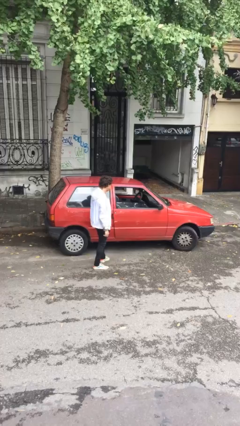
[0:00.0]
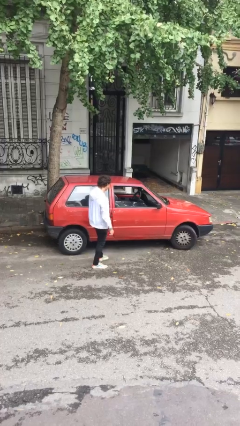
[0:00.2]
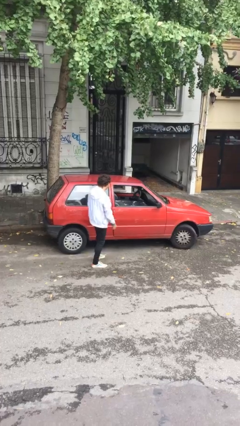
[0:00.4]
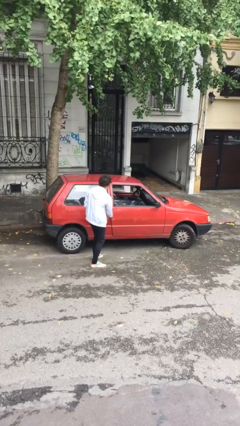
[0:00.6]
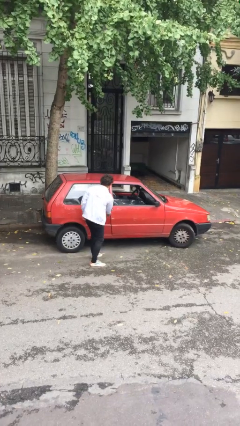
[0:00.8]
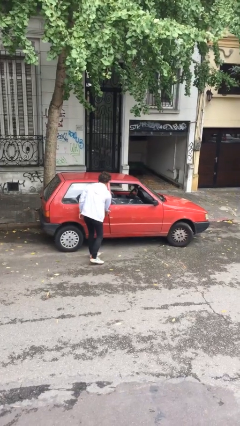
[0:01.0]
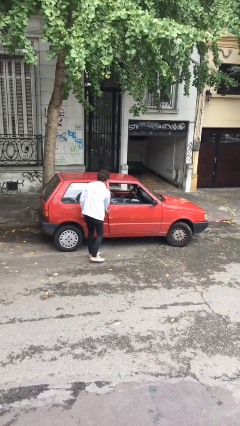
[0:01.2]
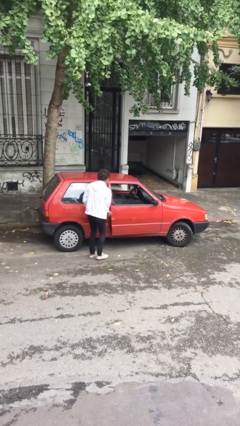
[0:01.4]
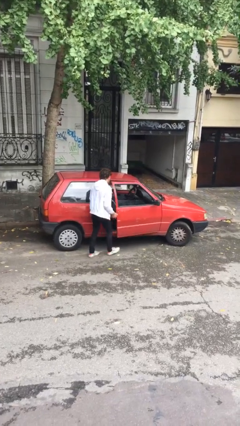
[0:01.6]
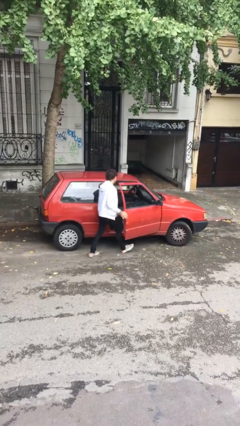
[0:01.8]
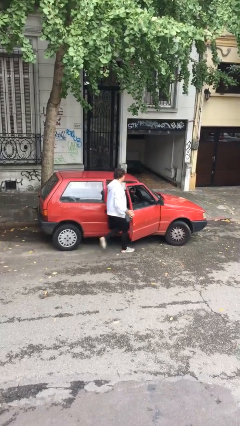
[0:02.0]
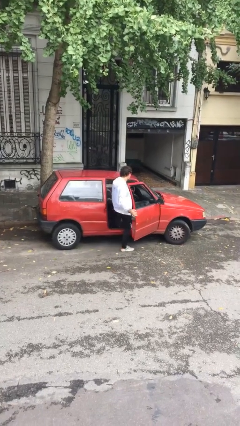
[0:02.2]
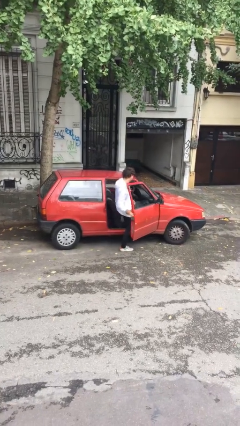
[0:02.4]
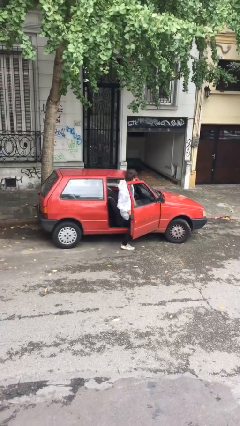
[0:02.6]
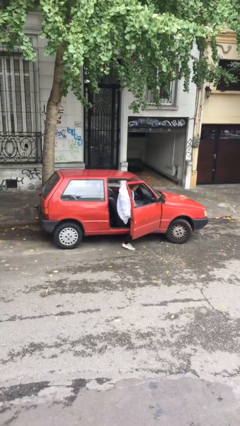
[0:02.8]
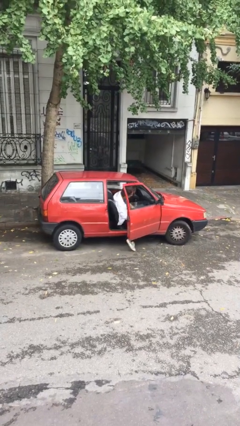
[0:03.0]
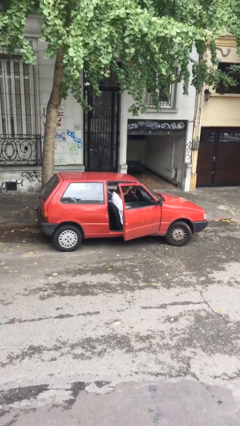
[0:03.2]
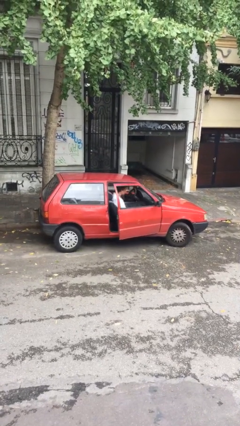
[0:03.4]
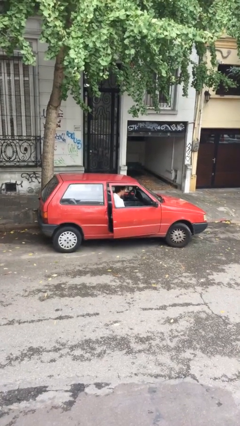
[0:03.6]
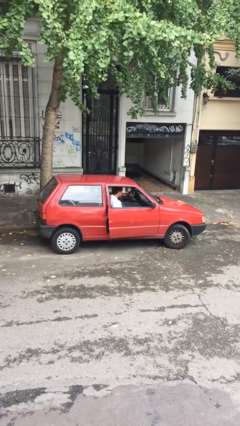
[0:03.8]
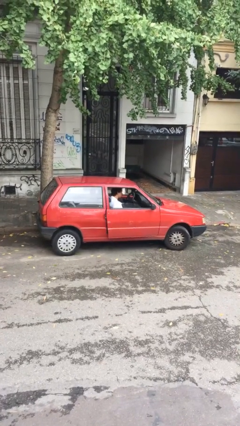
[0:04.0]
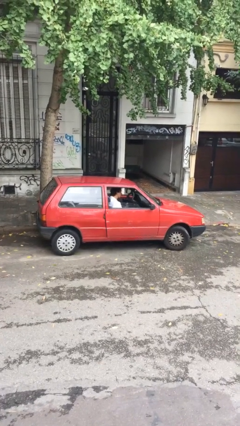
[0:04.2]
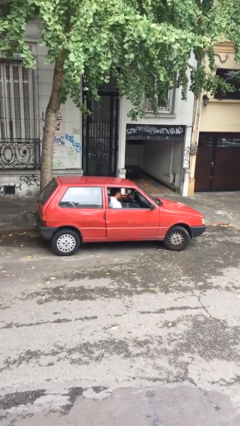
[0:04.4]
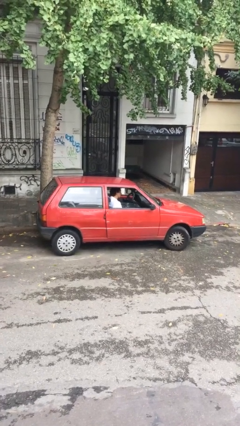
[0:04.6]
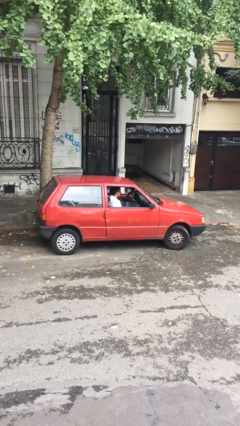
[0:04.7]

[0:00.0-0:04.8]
car picks up person

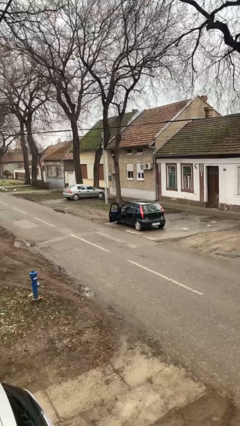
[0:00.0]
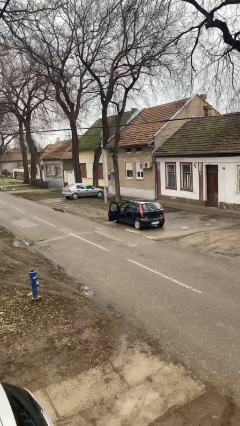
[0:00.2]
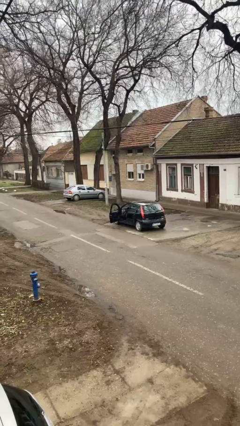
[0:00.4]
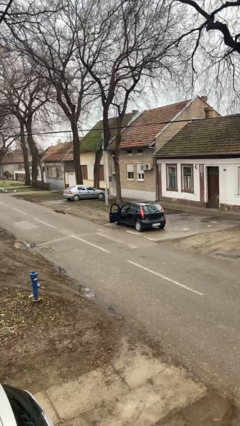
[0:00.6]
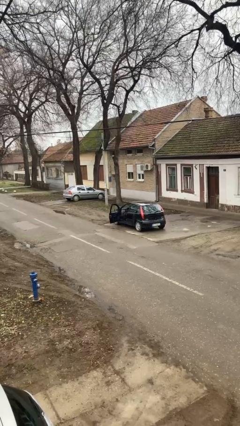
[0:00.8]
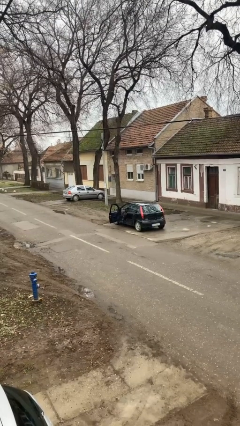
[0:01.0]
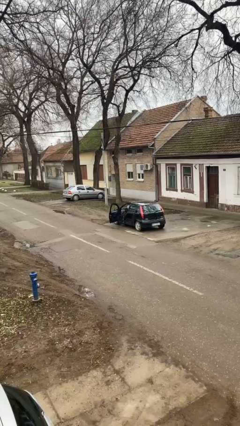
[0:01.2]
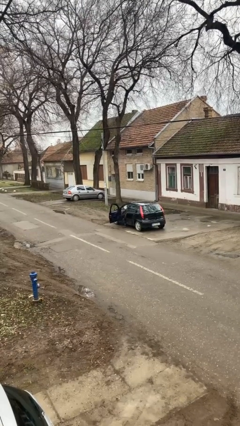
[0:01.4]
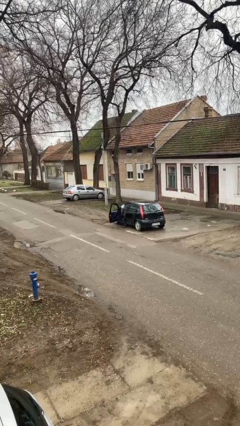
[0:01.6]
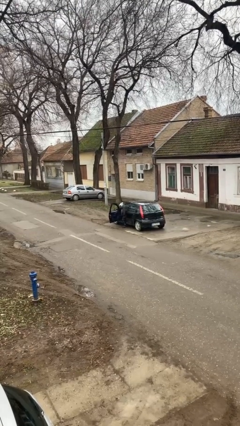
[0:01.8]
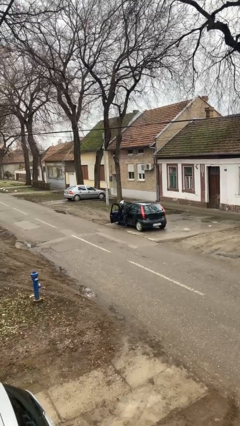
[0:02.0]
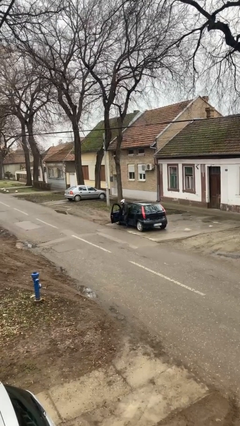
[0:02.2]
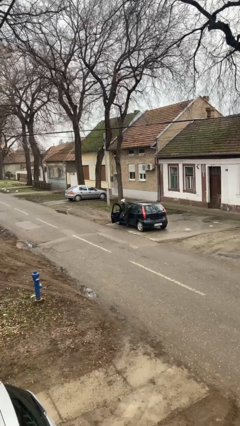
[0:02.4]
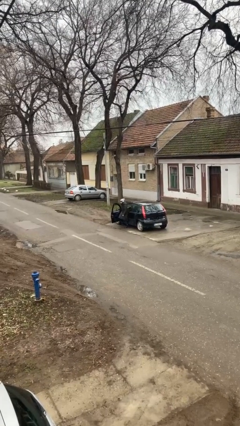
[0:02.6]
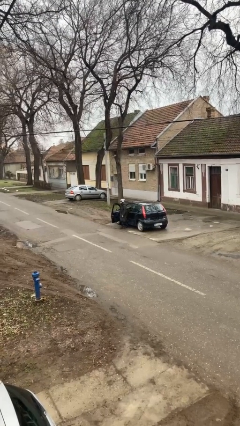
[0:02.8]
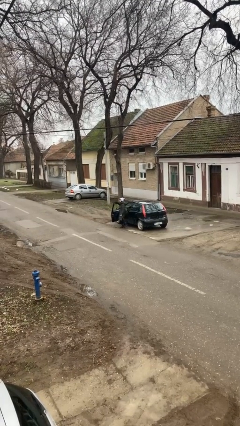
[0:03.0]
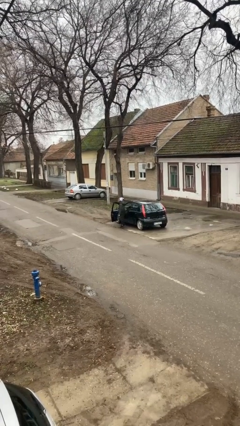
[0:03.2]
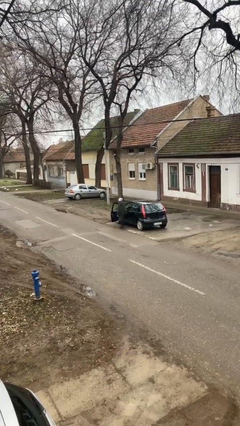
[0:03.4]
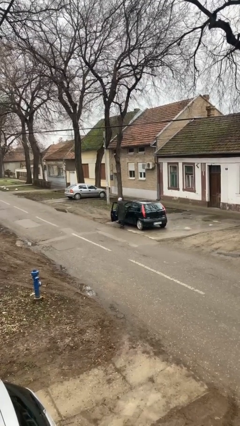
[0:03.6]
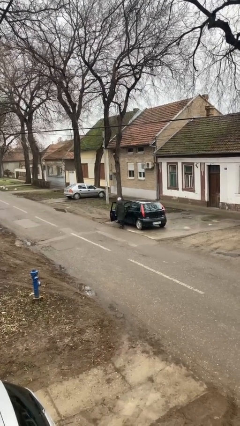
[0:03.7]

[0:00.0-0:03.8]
person exits car

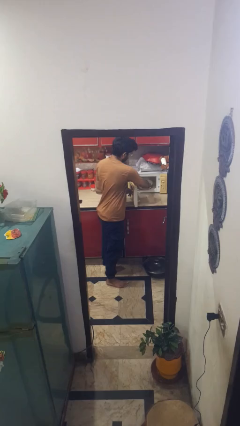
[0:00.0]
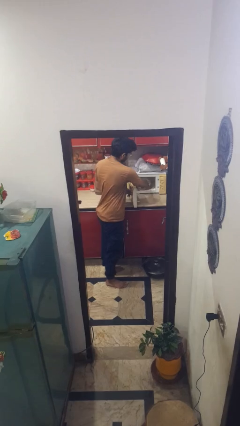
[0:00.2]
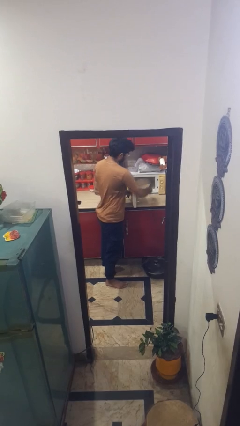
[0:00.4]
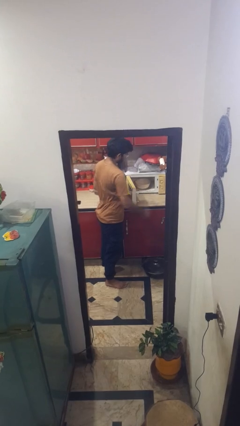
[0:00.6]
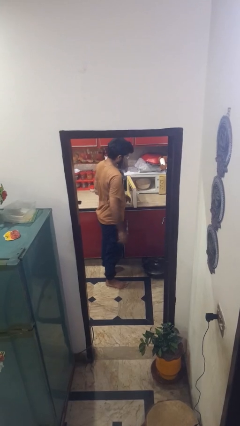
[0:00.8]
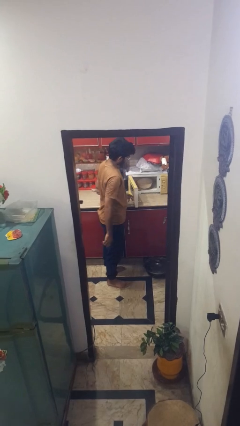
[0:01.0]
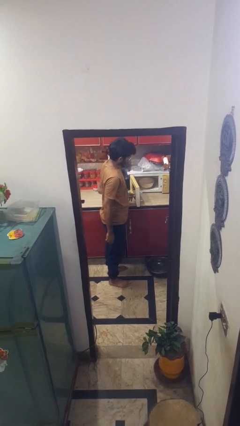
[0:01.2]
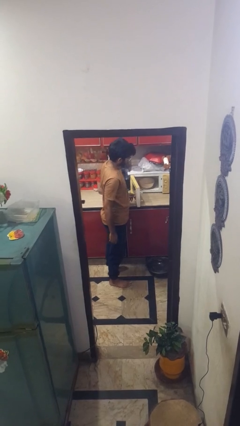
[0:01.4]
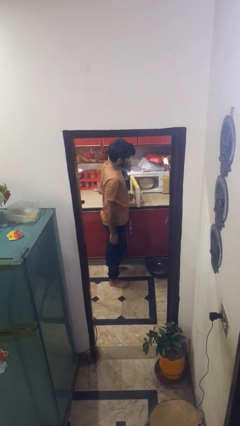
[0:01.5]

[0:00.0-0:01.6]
person puts object into microwave

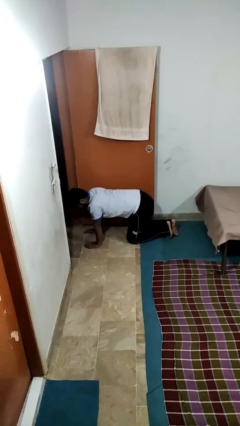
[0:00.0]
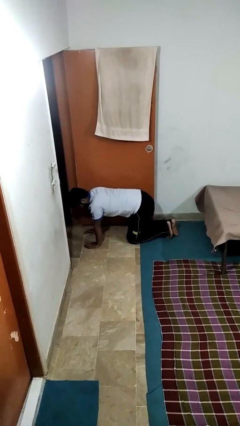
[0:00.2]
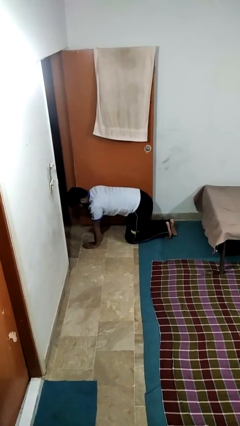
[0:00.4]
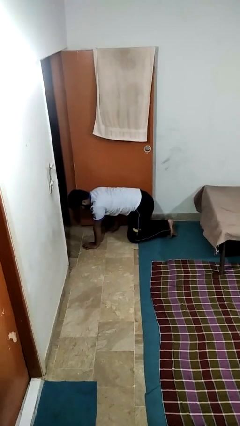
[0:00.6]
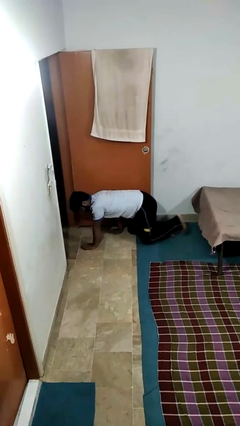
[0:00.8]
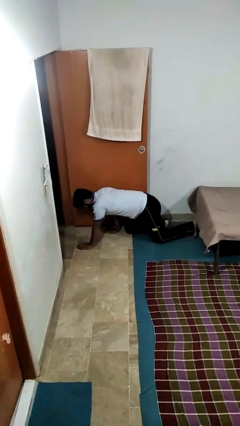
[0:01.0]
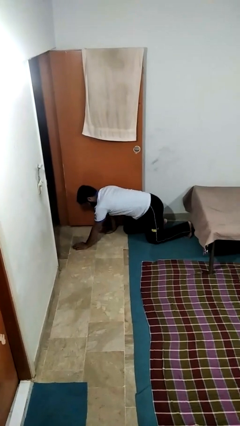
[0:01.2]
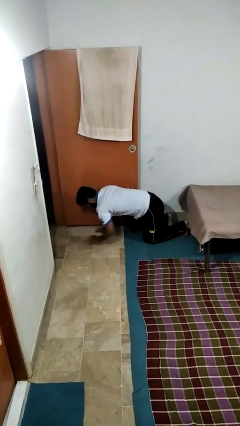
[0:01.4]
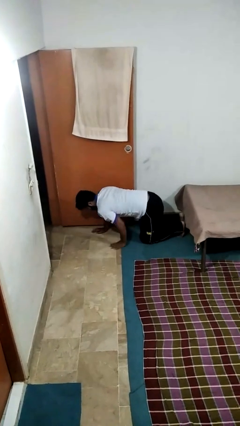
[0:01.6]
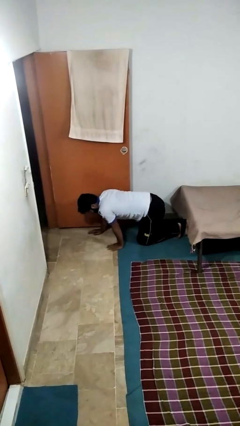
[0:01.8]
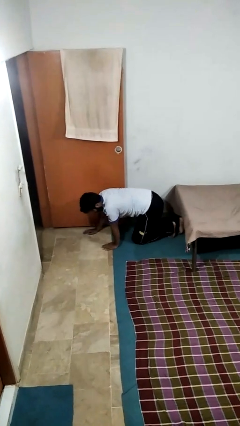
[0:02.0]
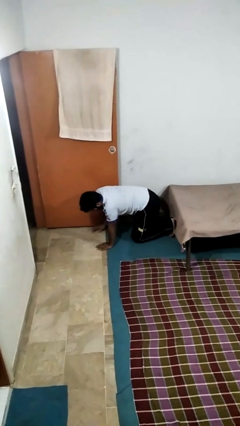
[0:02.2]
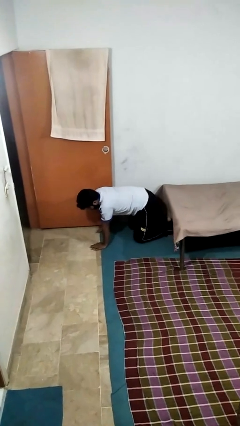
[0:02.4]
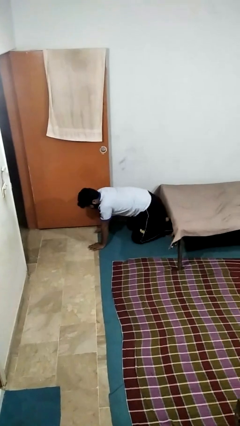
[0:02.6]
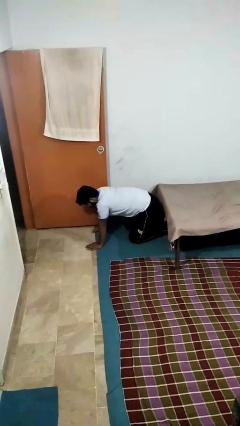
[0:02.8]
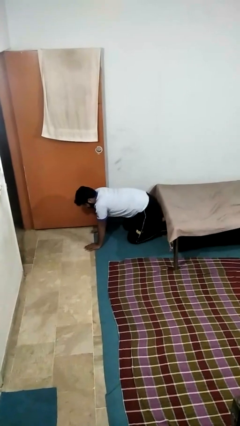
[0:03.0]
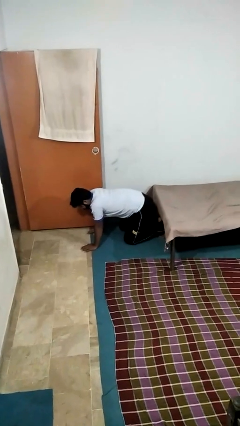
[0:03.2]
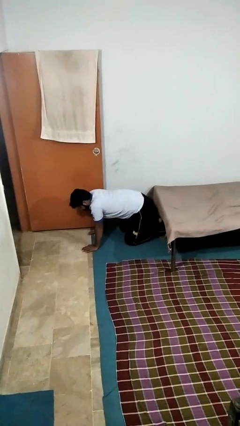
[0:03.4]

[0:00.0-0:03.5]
person crawls

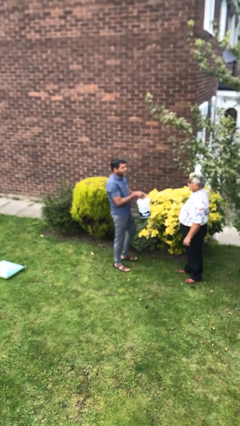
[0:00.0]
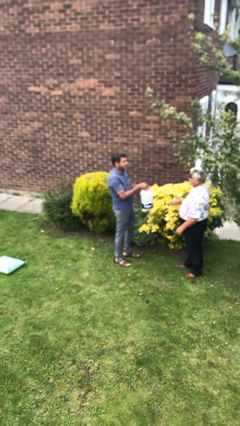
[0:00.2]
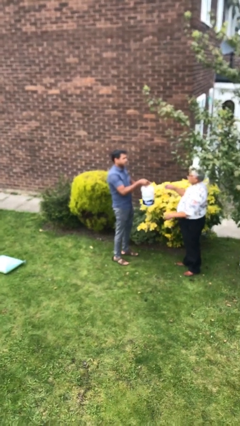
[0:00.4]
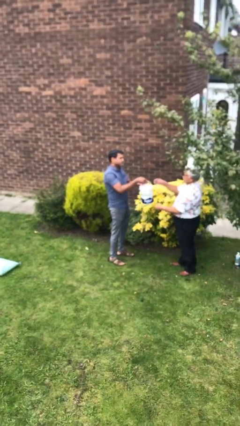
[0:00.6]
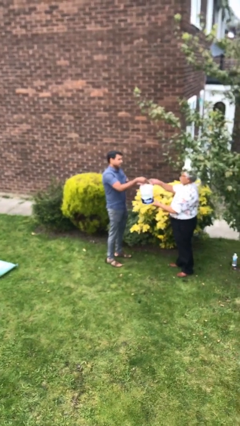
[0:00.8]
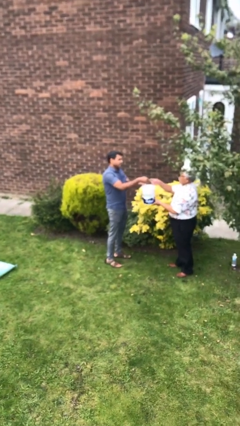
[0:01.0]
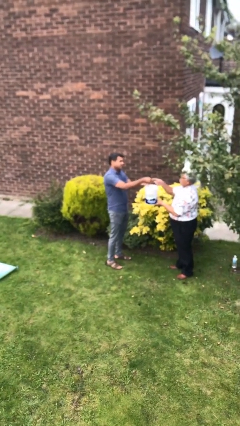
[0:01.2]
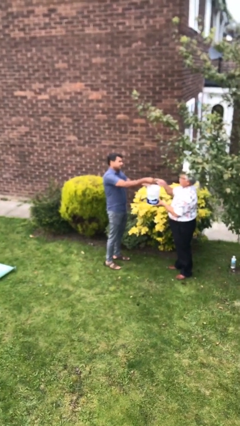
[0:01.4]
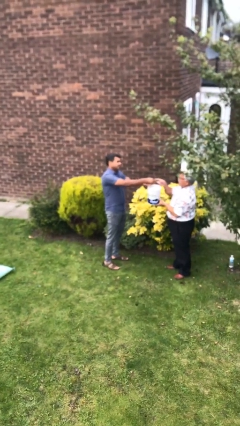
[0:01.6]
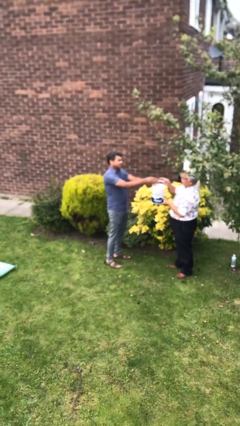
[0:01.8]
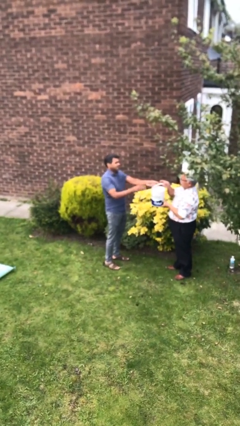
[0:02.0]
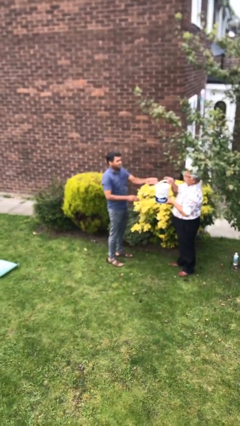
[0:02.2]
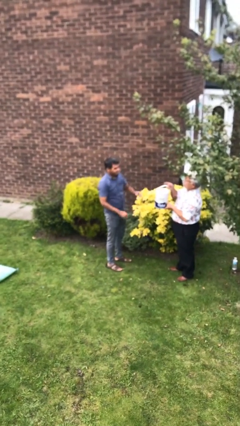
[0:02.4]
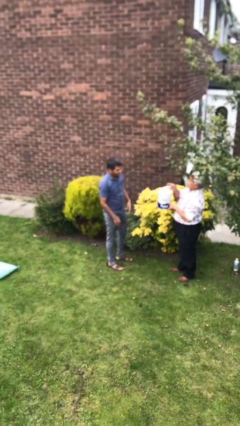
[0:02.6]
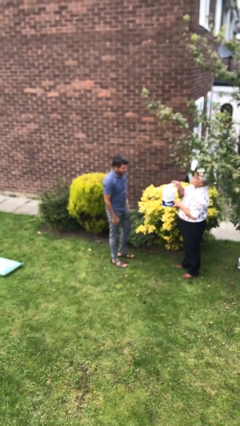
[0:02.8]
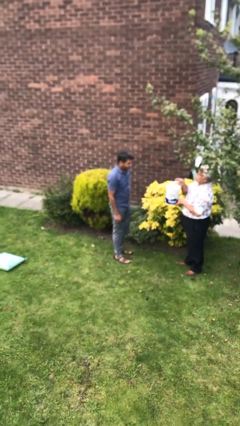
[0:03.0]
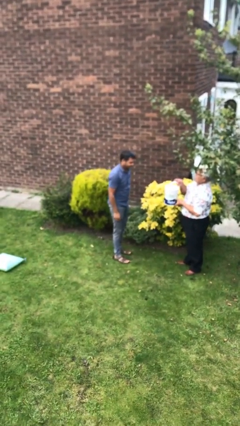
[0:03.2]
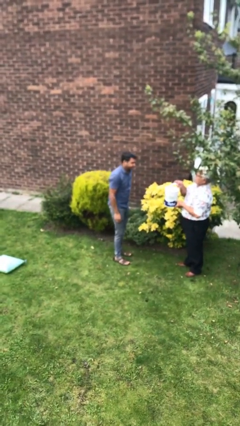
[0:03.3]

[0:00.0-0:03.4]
person transfers object to person

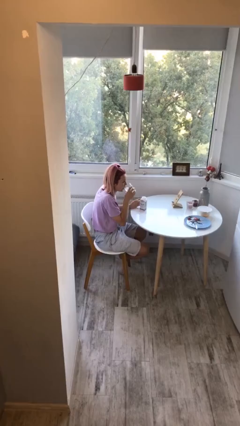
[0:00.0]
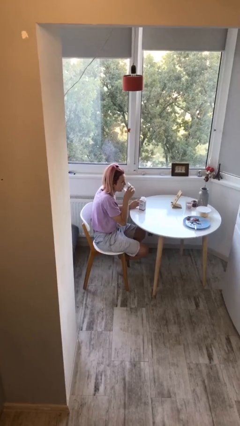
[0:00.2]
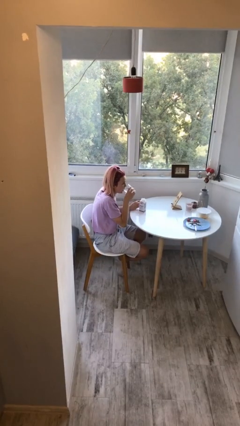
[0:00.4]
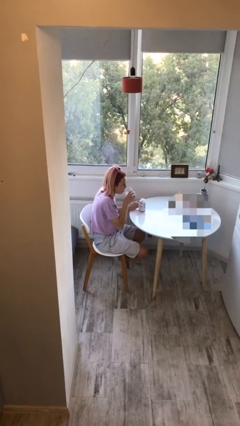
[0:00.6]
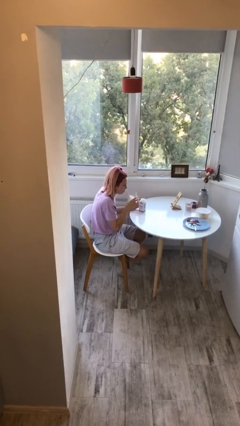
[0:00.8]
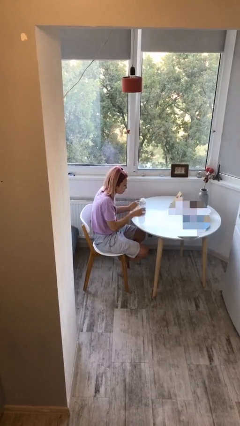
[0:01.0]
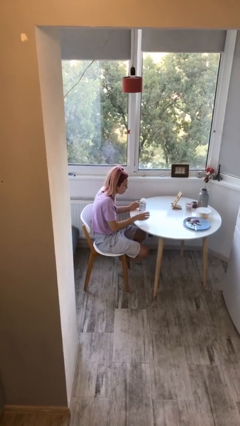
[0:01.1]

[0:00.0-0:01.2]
person drinks from cup
